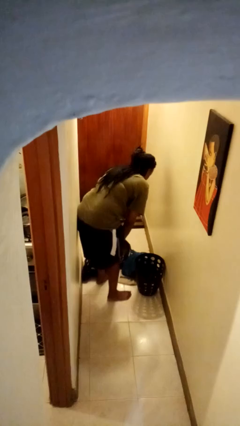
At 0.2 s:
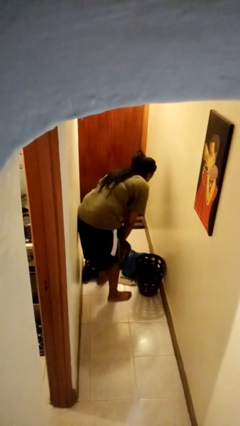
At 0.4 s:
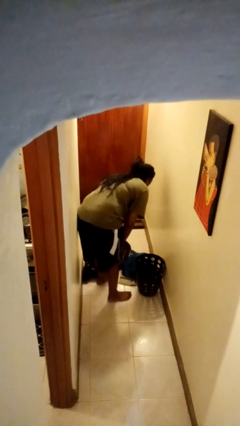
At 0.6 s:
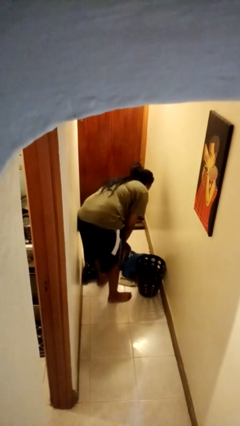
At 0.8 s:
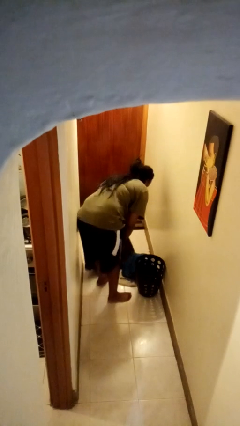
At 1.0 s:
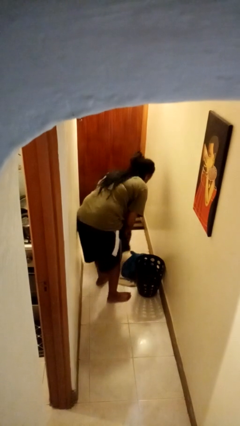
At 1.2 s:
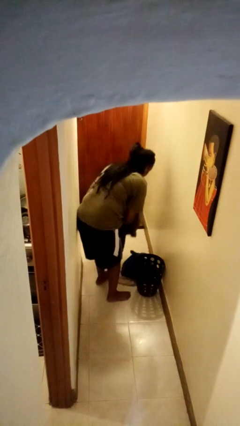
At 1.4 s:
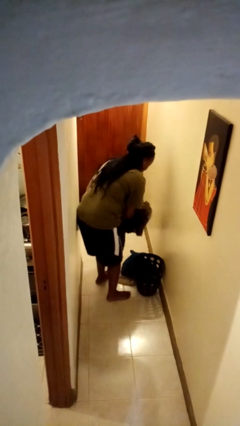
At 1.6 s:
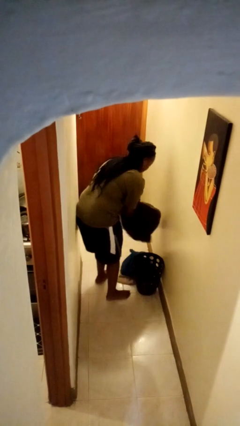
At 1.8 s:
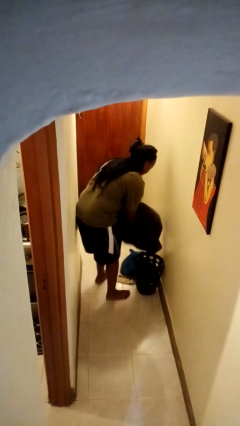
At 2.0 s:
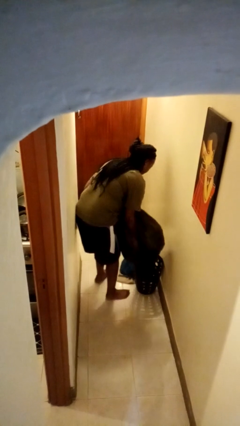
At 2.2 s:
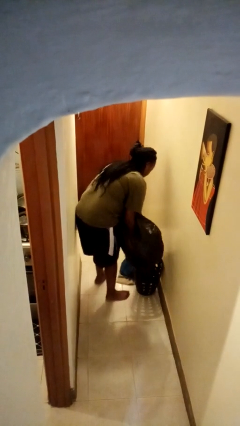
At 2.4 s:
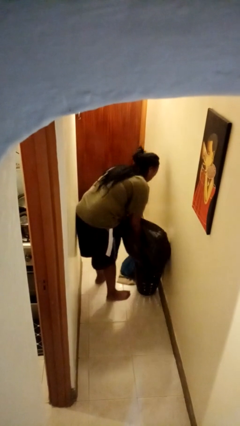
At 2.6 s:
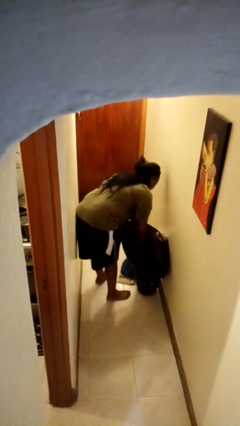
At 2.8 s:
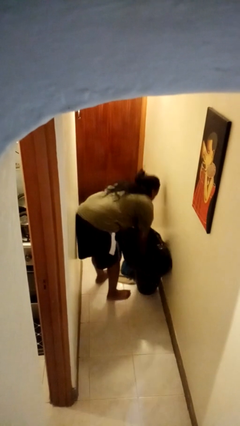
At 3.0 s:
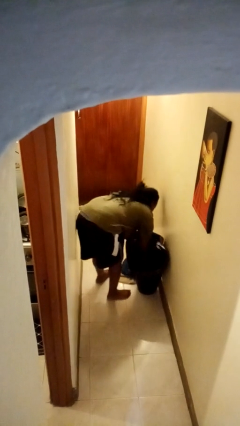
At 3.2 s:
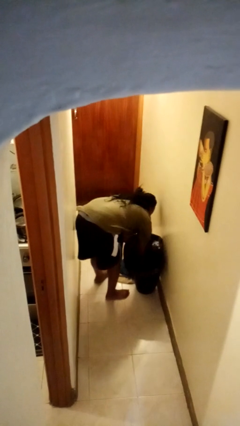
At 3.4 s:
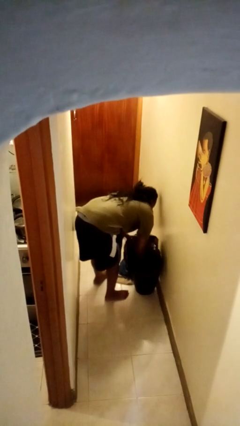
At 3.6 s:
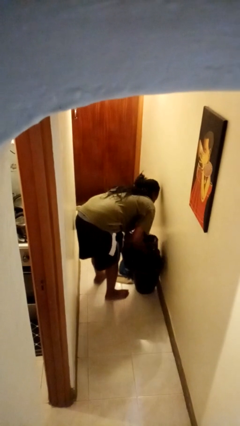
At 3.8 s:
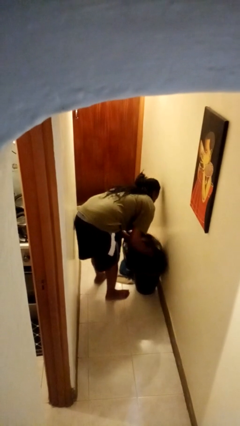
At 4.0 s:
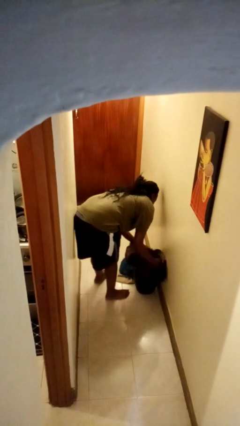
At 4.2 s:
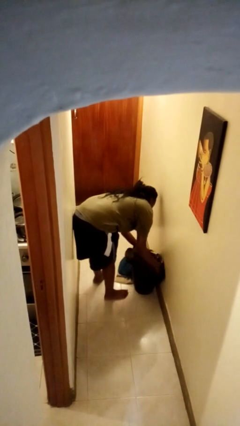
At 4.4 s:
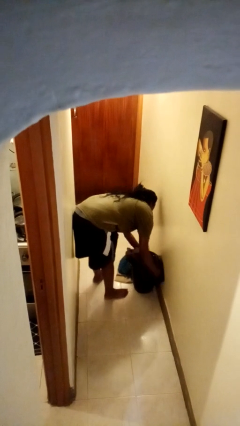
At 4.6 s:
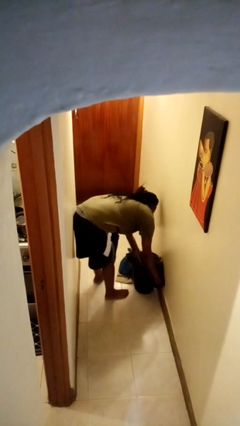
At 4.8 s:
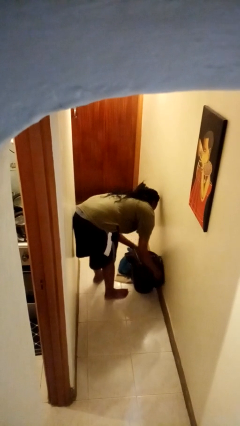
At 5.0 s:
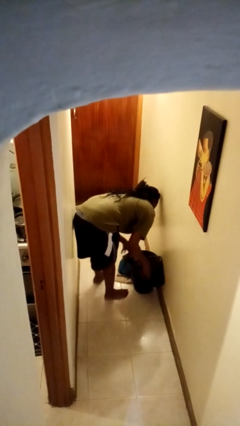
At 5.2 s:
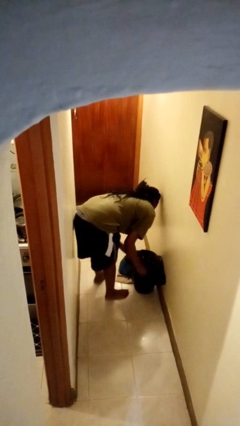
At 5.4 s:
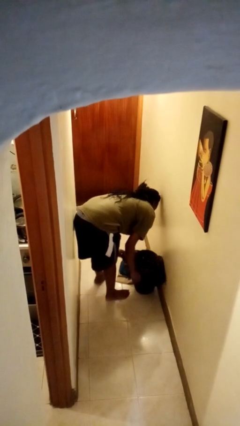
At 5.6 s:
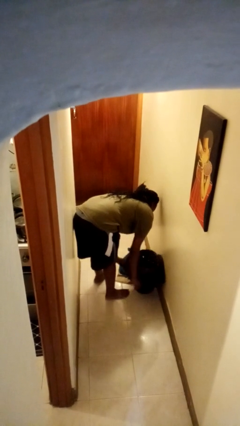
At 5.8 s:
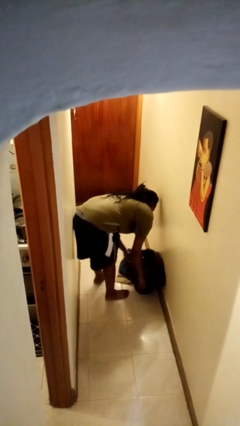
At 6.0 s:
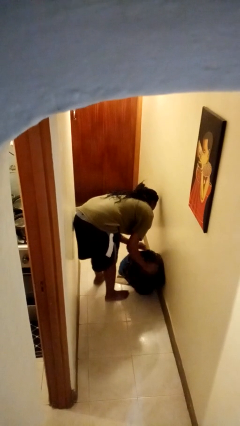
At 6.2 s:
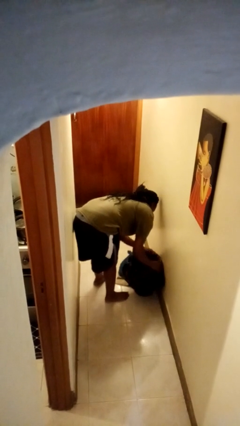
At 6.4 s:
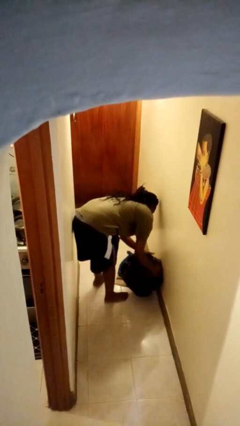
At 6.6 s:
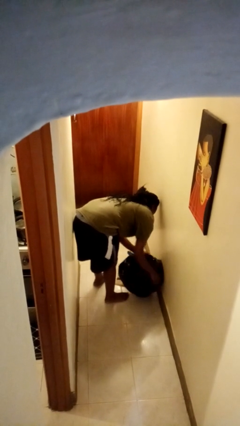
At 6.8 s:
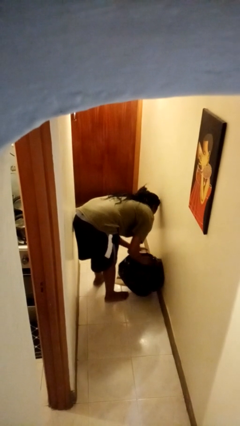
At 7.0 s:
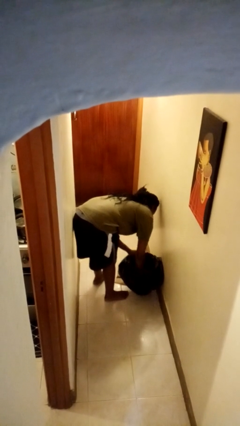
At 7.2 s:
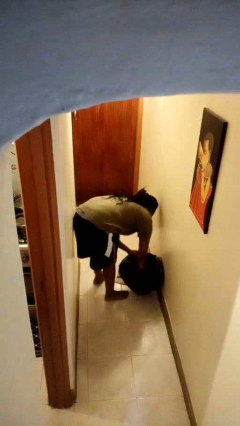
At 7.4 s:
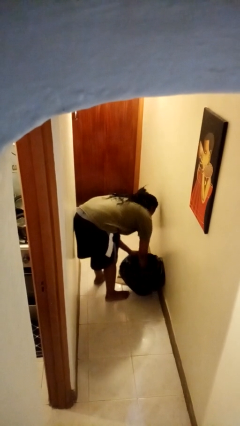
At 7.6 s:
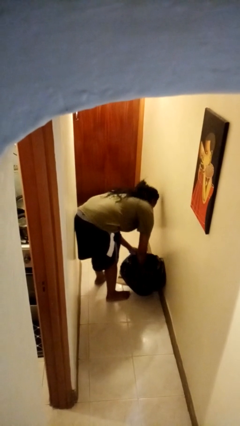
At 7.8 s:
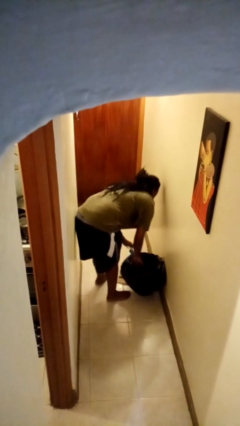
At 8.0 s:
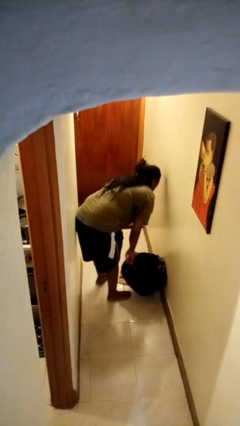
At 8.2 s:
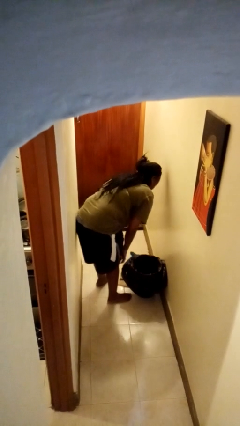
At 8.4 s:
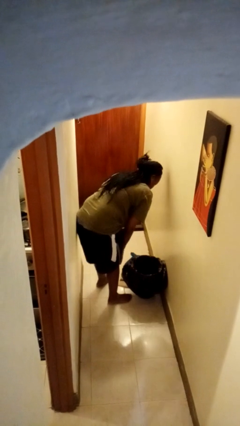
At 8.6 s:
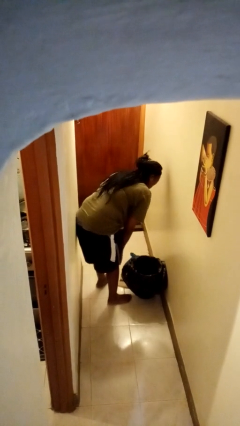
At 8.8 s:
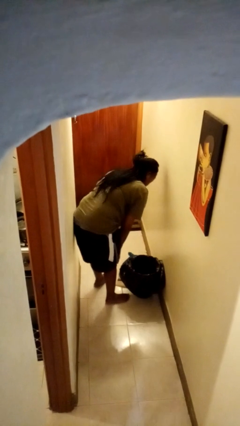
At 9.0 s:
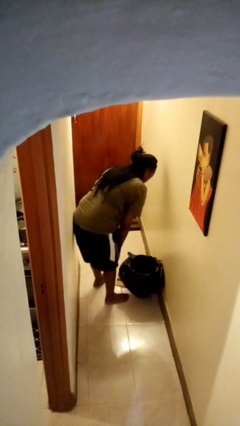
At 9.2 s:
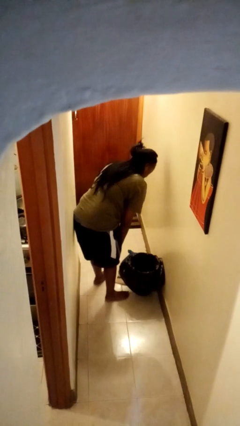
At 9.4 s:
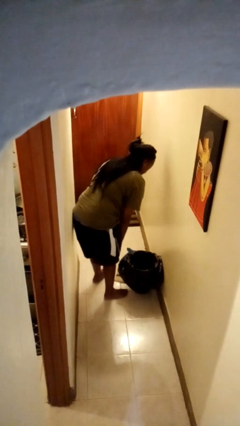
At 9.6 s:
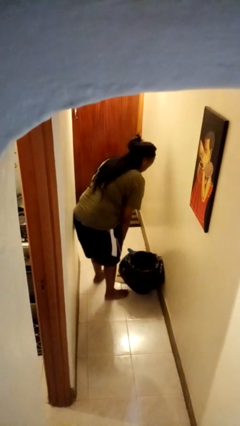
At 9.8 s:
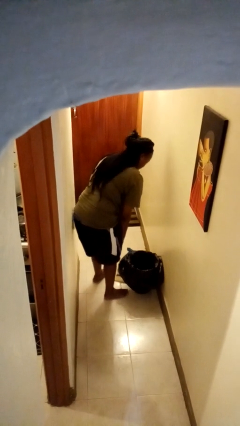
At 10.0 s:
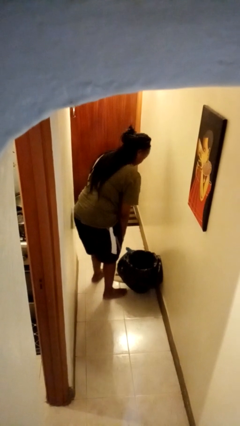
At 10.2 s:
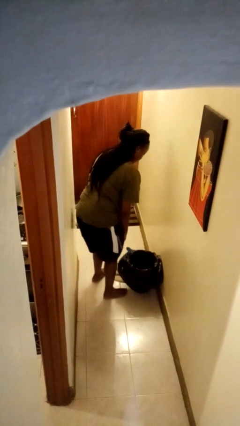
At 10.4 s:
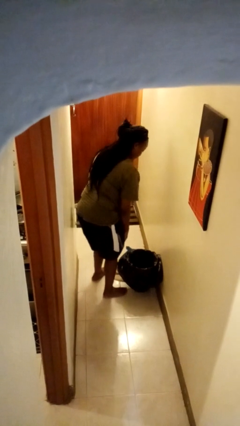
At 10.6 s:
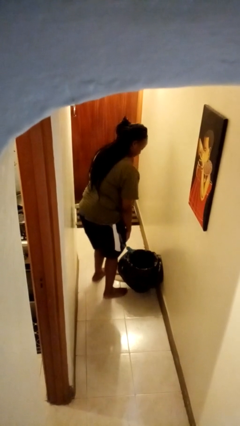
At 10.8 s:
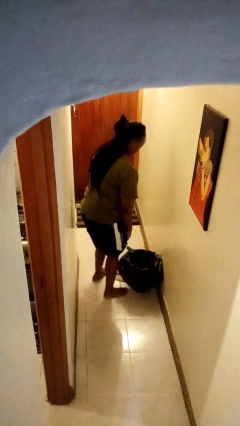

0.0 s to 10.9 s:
person inserts trashbag into trashcan

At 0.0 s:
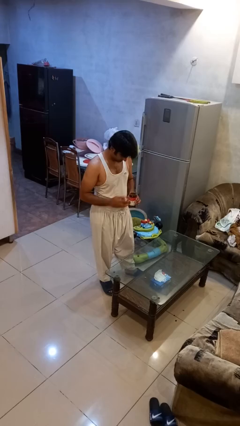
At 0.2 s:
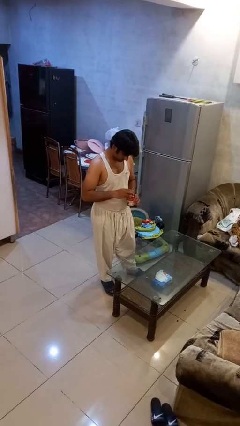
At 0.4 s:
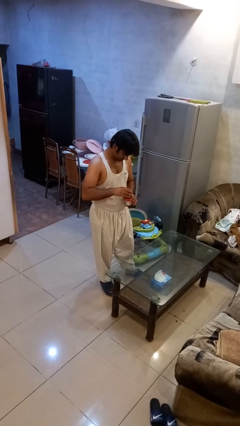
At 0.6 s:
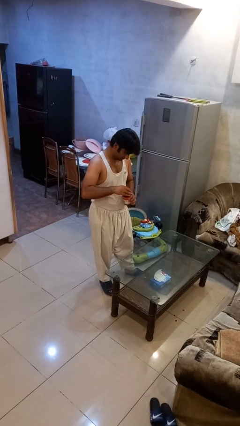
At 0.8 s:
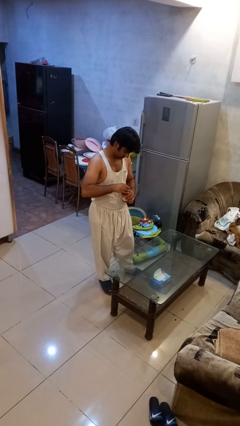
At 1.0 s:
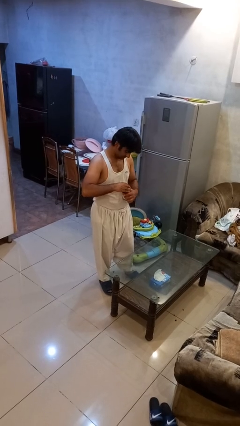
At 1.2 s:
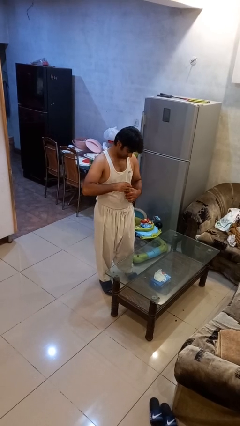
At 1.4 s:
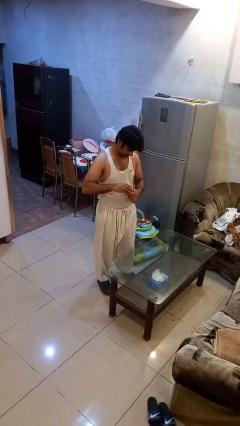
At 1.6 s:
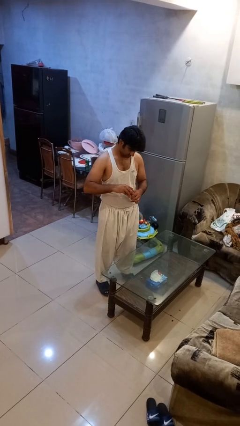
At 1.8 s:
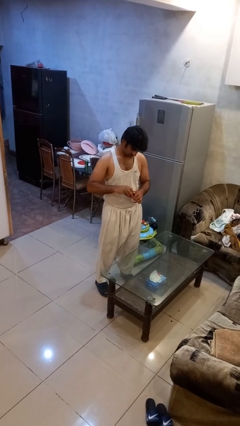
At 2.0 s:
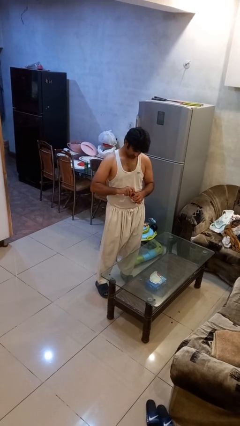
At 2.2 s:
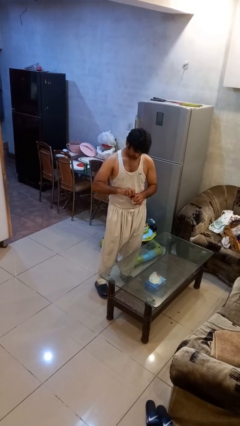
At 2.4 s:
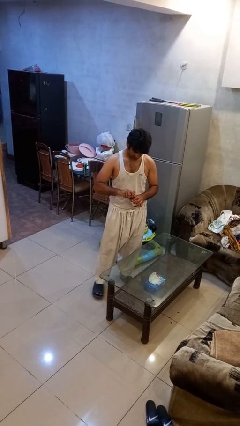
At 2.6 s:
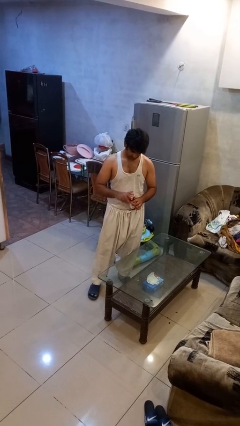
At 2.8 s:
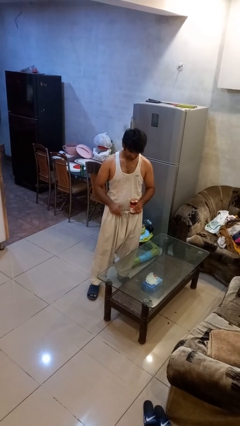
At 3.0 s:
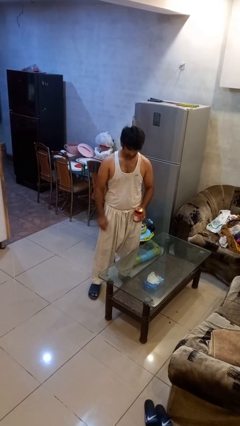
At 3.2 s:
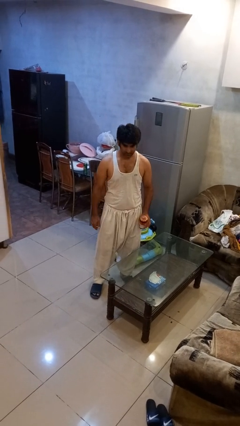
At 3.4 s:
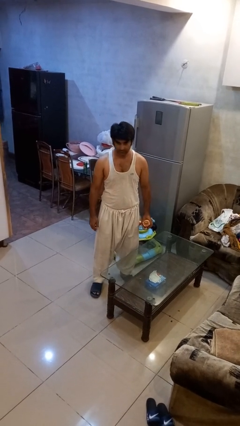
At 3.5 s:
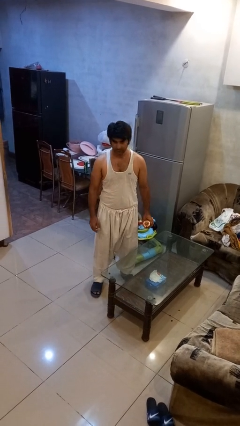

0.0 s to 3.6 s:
person closes jar

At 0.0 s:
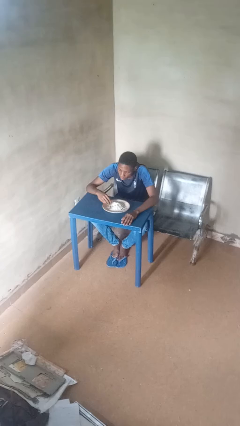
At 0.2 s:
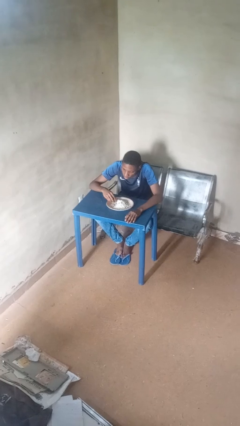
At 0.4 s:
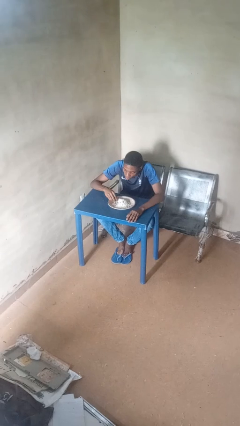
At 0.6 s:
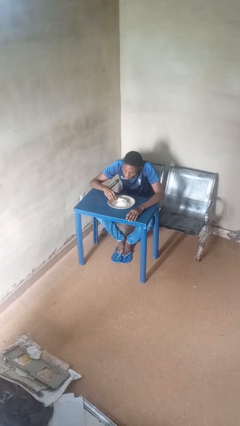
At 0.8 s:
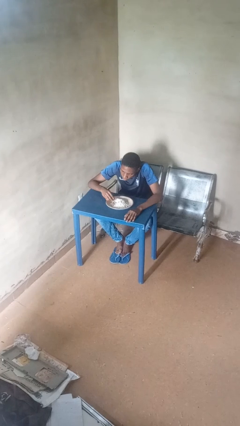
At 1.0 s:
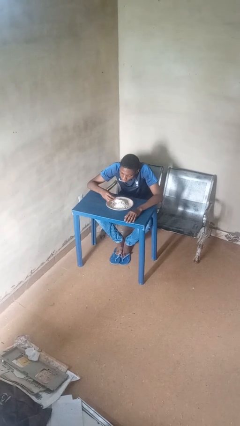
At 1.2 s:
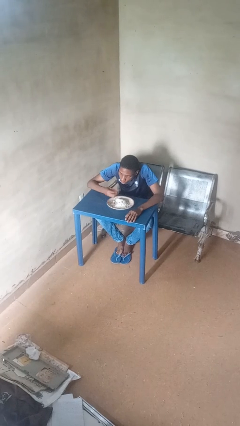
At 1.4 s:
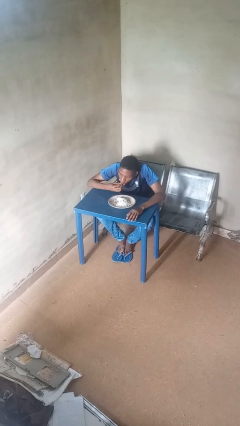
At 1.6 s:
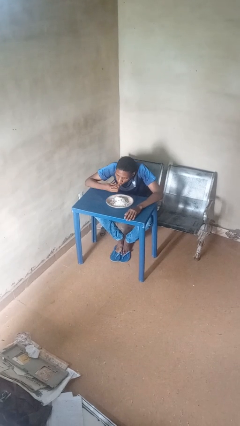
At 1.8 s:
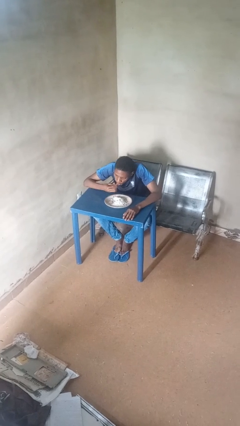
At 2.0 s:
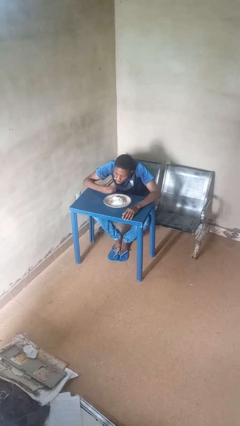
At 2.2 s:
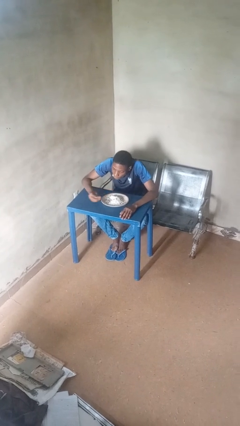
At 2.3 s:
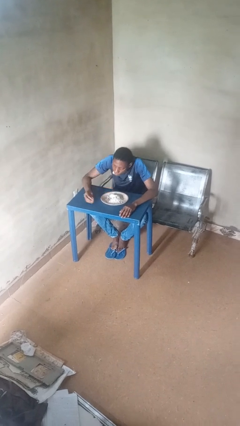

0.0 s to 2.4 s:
person eats with hands

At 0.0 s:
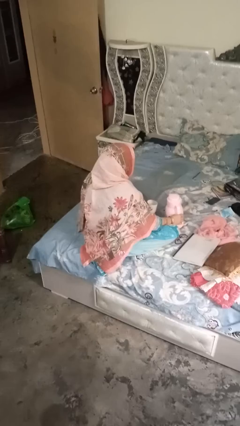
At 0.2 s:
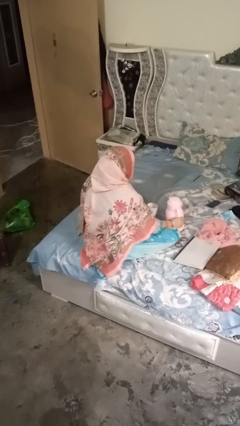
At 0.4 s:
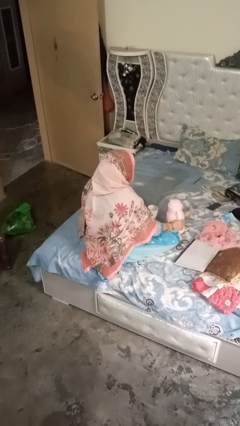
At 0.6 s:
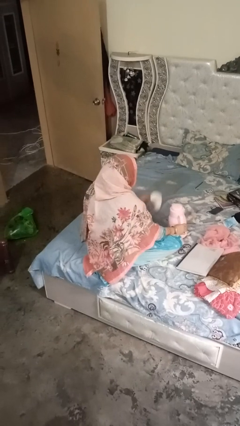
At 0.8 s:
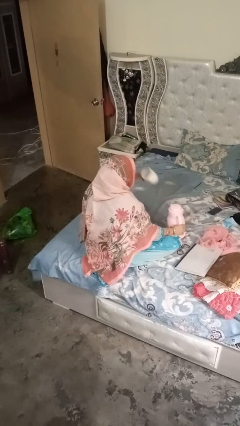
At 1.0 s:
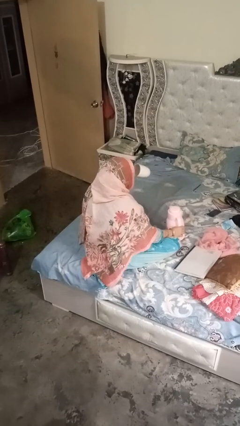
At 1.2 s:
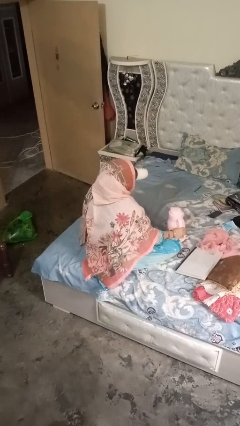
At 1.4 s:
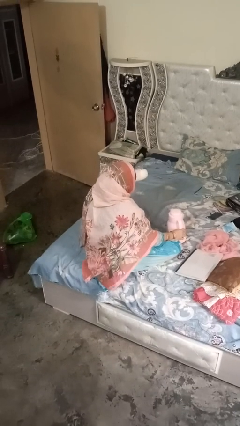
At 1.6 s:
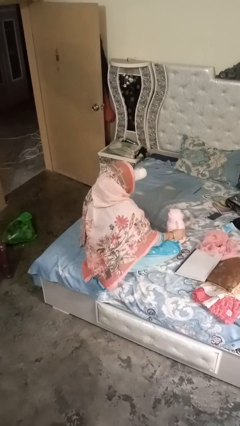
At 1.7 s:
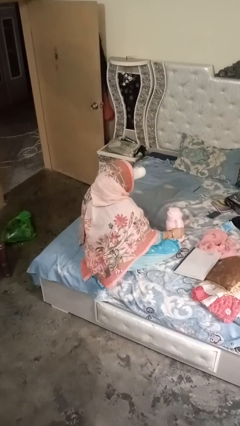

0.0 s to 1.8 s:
person pours coffee into mug
